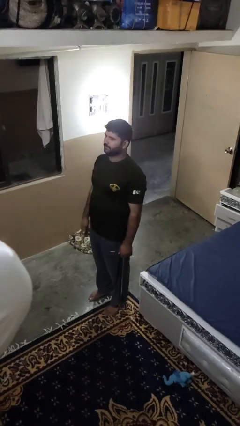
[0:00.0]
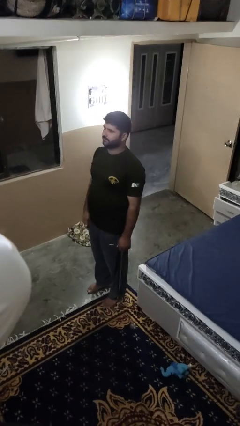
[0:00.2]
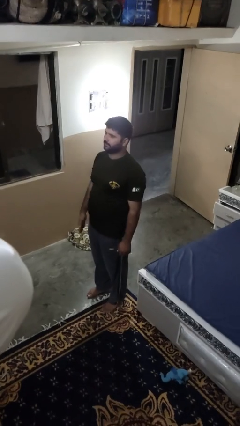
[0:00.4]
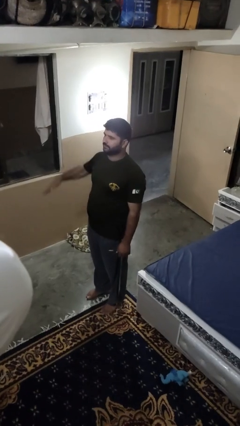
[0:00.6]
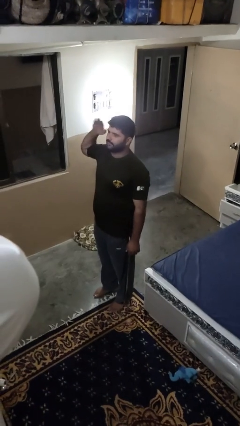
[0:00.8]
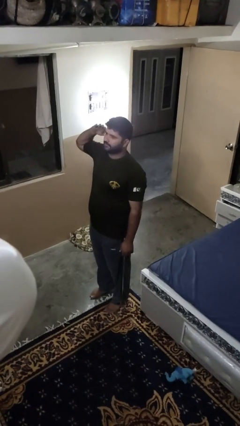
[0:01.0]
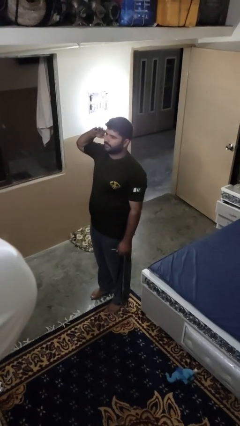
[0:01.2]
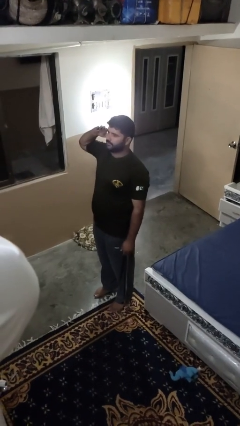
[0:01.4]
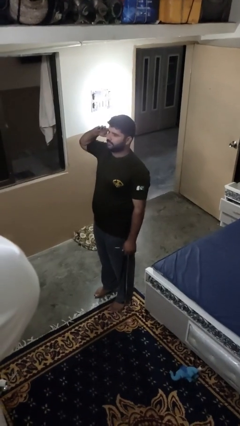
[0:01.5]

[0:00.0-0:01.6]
person salutes

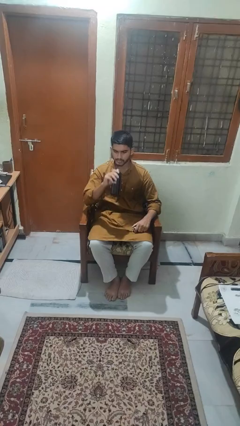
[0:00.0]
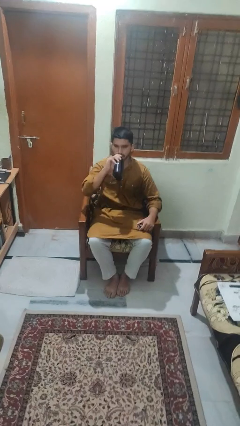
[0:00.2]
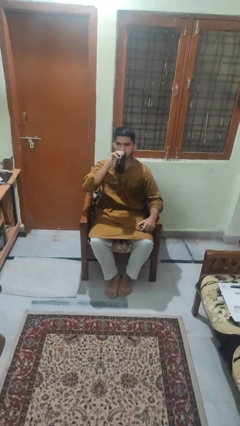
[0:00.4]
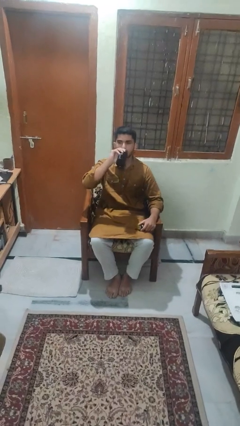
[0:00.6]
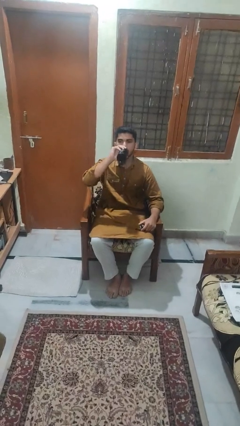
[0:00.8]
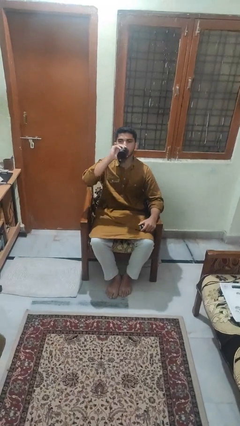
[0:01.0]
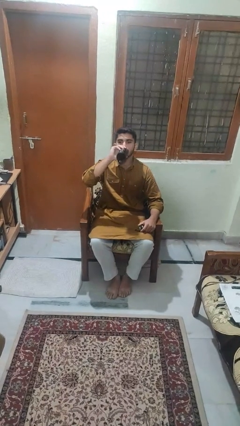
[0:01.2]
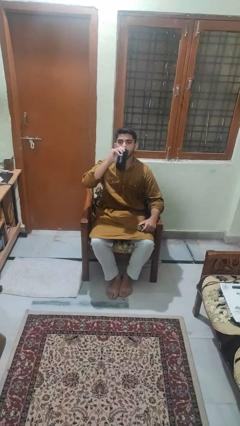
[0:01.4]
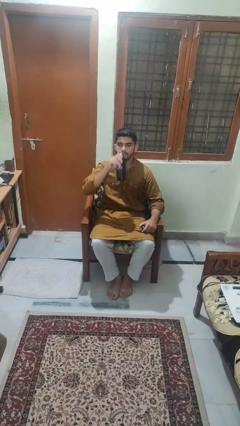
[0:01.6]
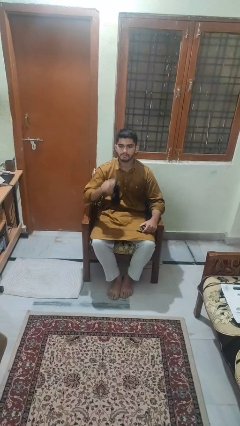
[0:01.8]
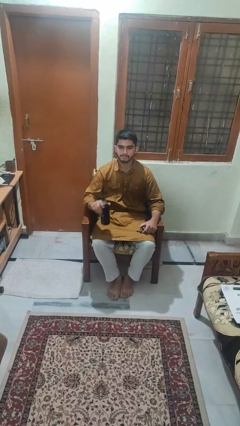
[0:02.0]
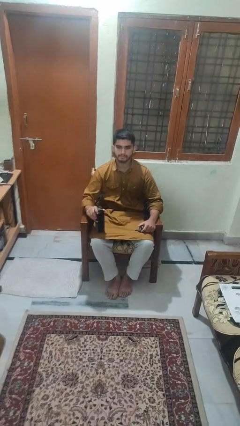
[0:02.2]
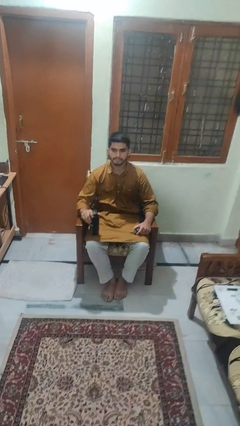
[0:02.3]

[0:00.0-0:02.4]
person drinks from bottle

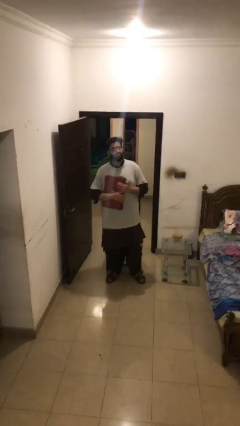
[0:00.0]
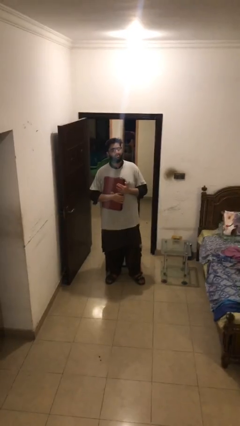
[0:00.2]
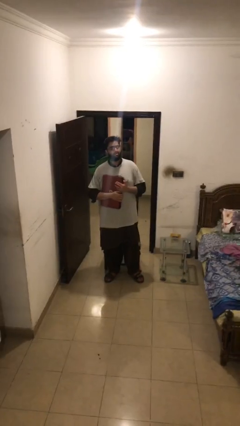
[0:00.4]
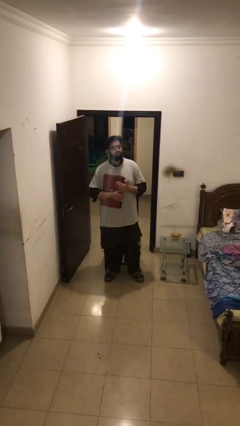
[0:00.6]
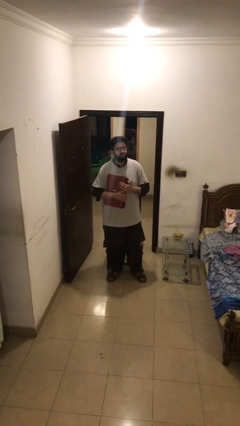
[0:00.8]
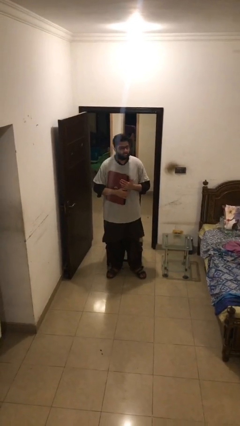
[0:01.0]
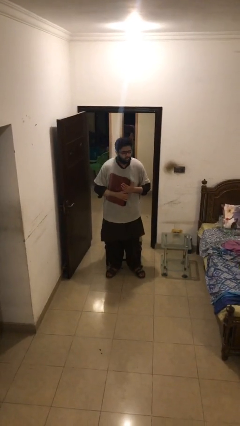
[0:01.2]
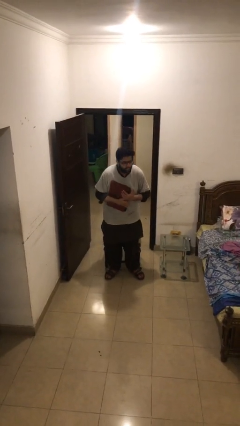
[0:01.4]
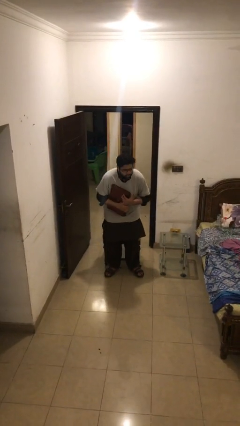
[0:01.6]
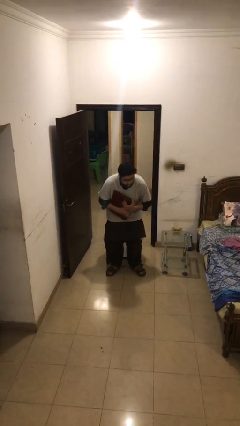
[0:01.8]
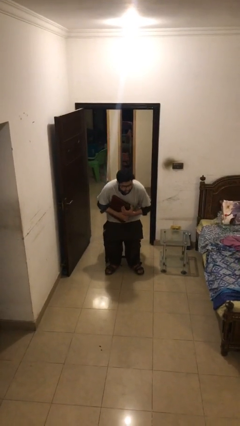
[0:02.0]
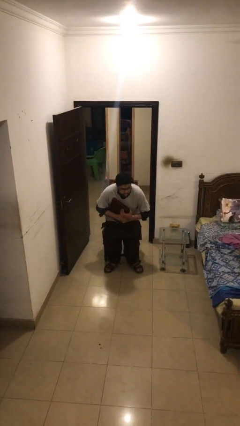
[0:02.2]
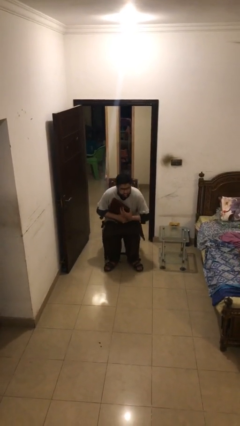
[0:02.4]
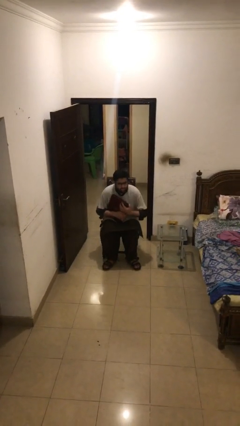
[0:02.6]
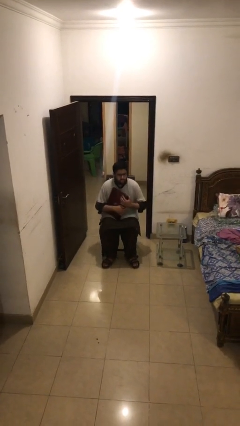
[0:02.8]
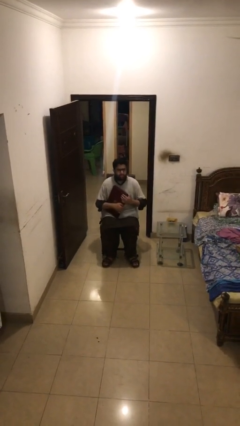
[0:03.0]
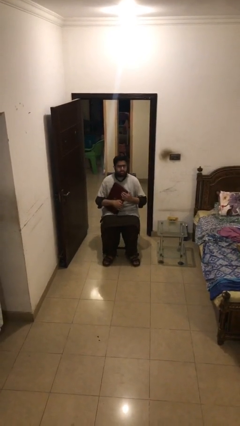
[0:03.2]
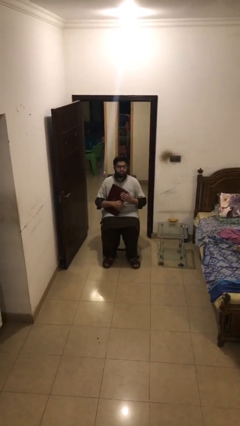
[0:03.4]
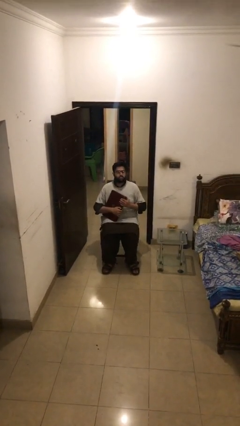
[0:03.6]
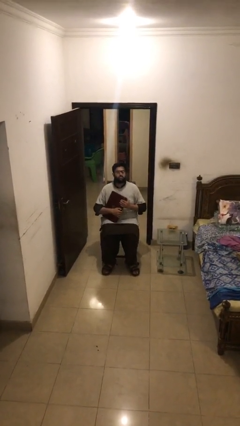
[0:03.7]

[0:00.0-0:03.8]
person sits down

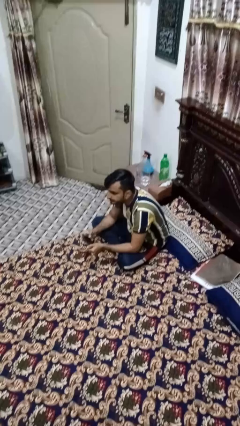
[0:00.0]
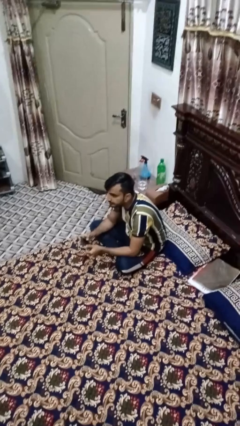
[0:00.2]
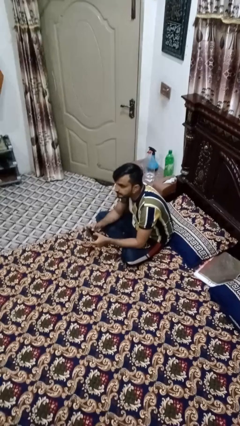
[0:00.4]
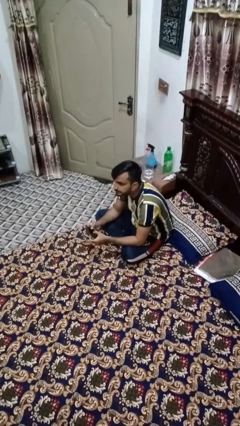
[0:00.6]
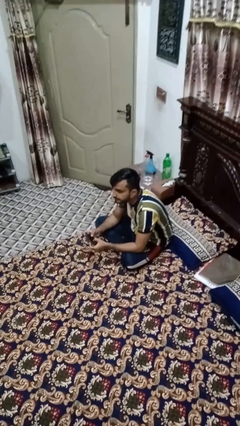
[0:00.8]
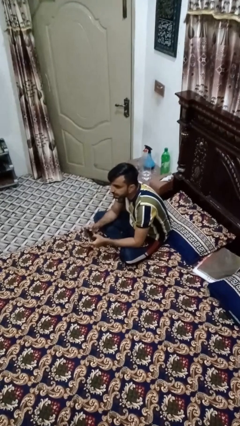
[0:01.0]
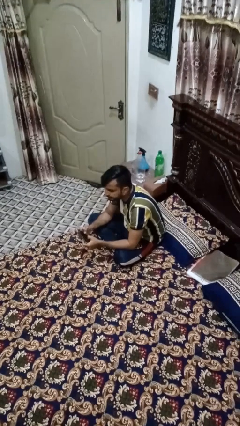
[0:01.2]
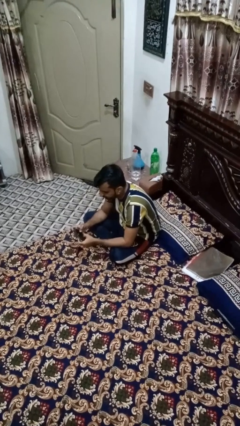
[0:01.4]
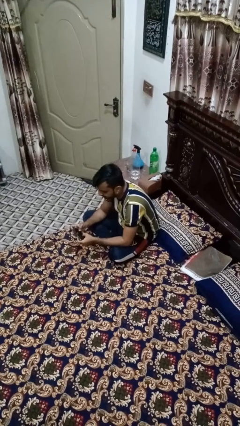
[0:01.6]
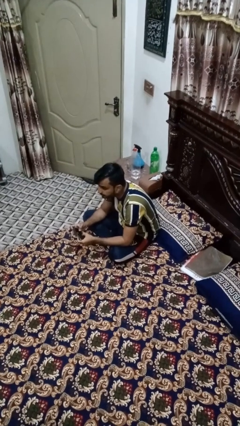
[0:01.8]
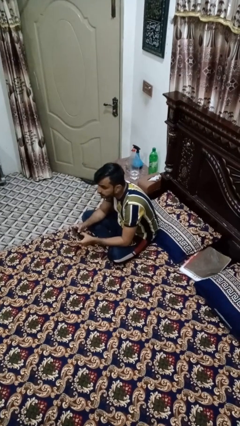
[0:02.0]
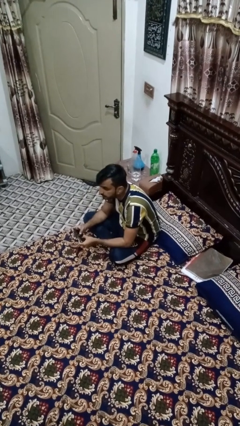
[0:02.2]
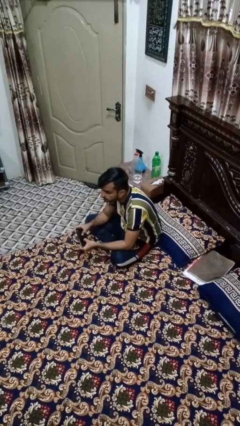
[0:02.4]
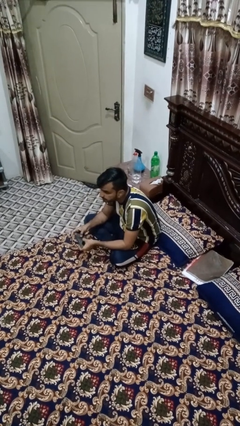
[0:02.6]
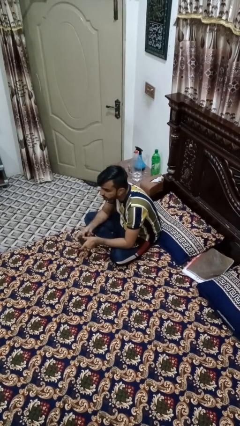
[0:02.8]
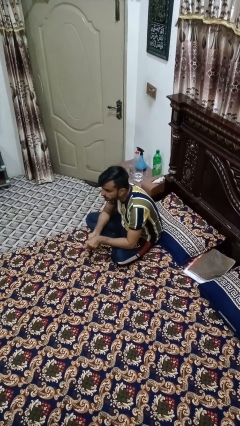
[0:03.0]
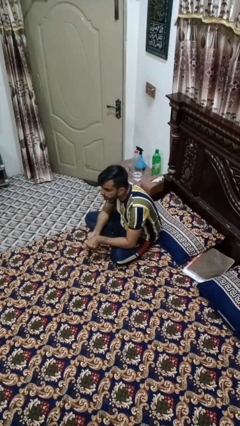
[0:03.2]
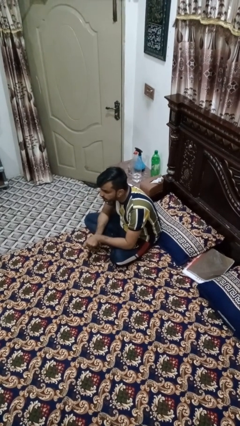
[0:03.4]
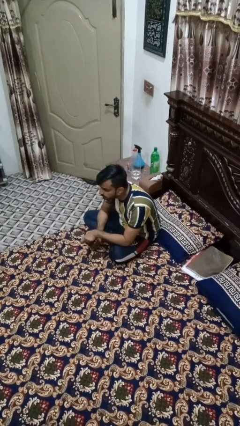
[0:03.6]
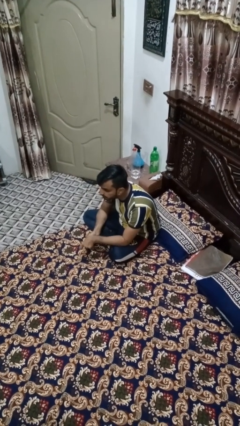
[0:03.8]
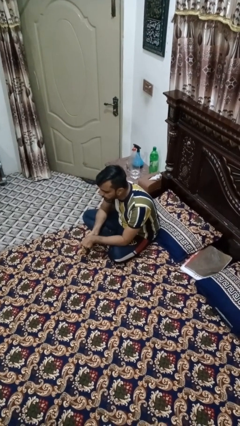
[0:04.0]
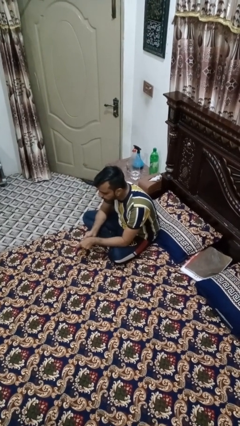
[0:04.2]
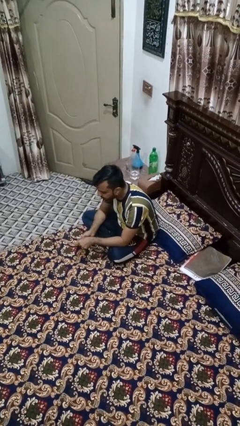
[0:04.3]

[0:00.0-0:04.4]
person interacts with handheld game

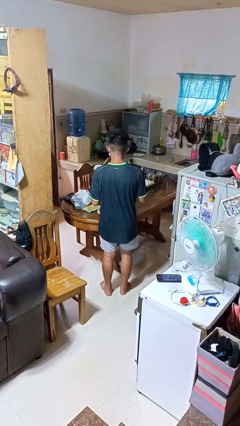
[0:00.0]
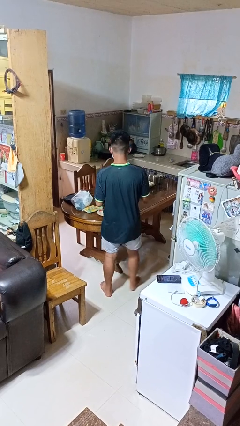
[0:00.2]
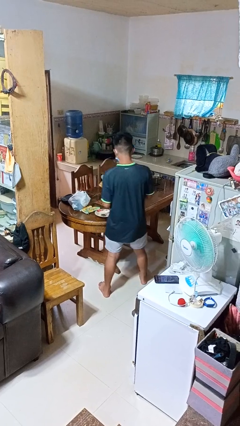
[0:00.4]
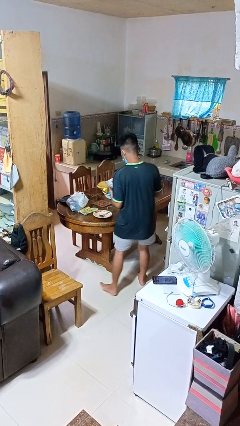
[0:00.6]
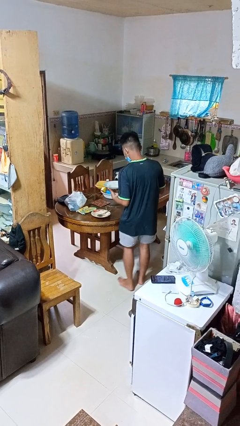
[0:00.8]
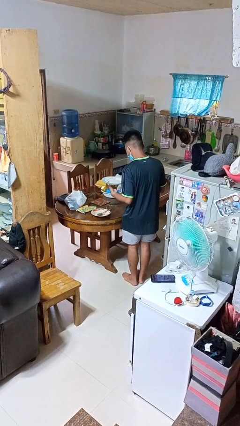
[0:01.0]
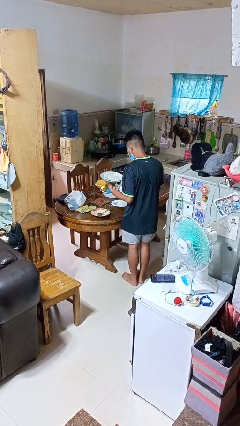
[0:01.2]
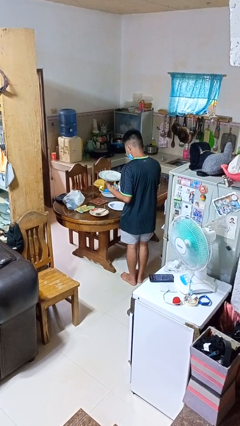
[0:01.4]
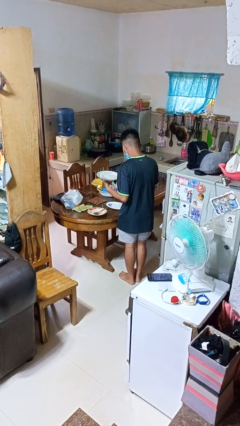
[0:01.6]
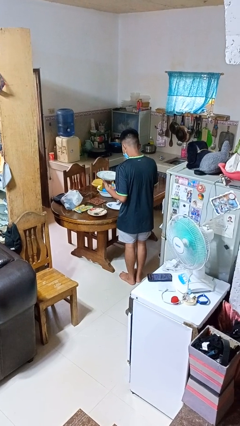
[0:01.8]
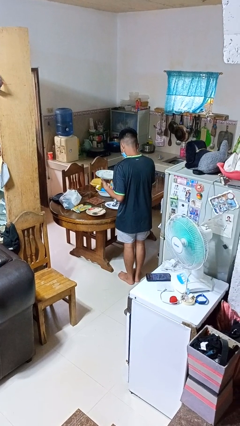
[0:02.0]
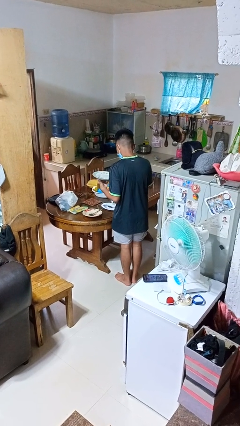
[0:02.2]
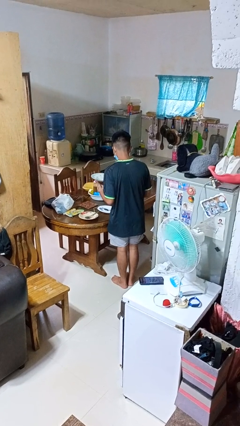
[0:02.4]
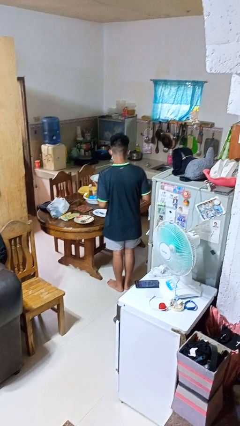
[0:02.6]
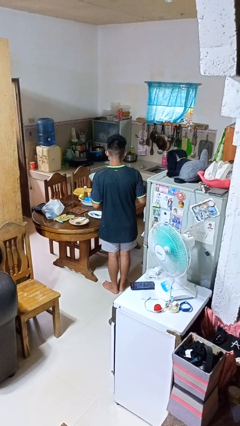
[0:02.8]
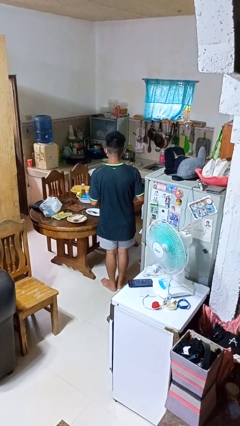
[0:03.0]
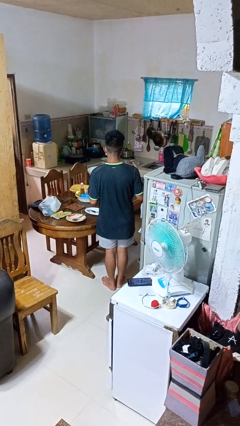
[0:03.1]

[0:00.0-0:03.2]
person sets table

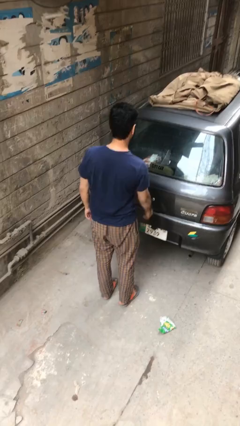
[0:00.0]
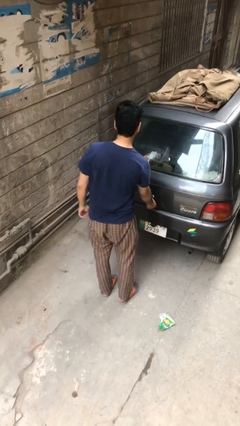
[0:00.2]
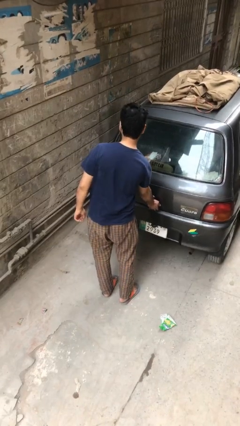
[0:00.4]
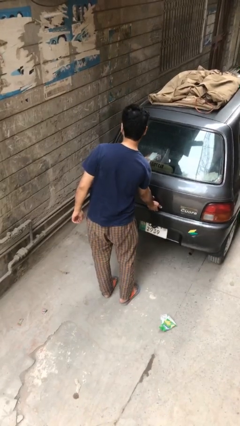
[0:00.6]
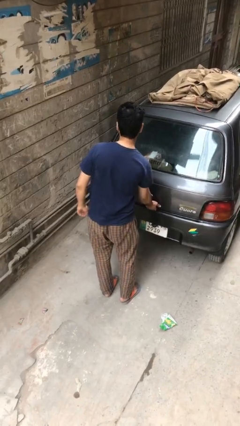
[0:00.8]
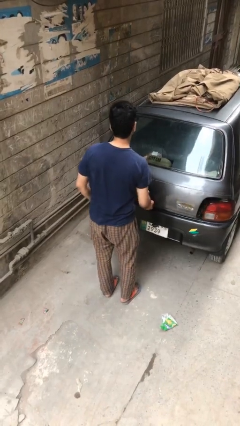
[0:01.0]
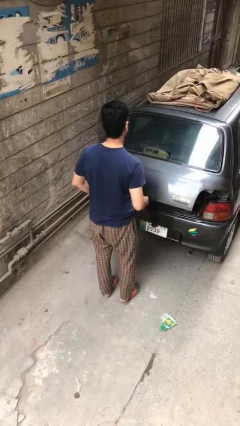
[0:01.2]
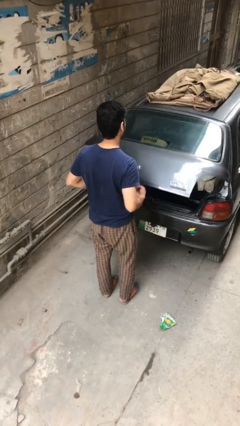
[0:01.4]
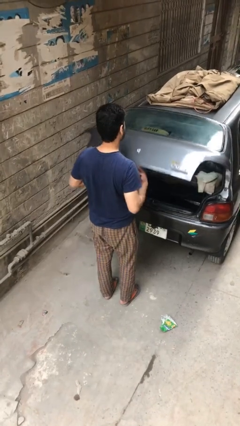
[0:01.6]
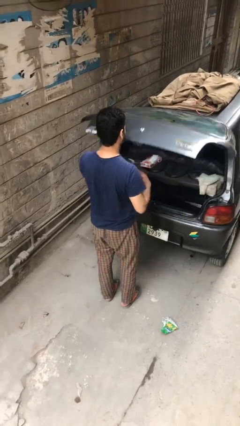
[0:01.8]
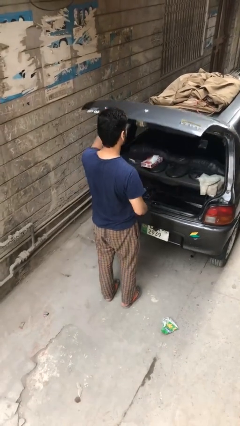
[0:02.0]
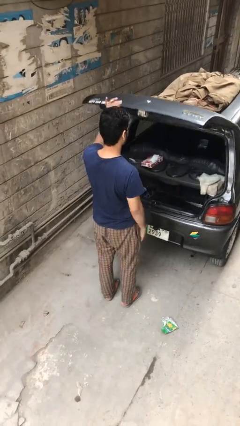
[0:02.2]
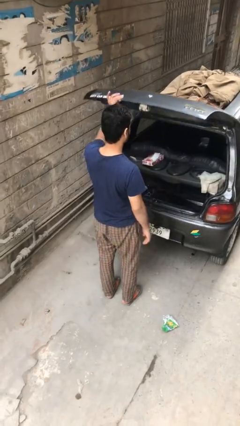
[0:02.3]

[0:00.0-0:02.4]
person opens car trunk
